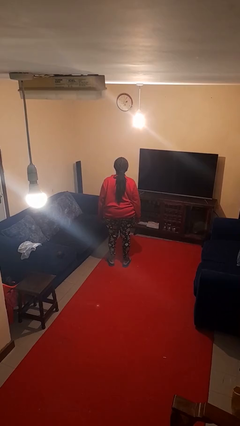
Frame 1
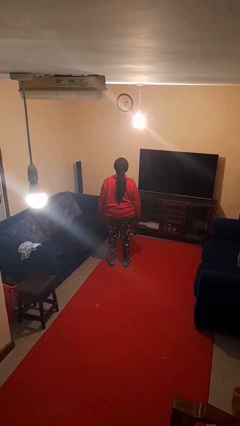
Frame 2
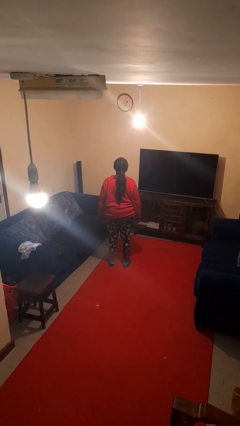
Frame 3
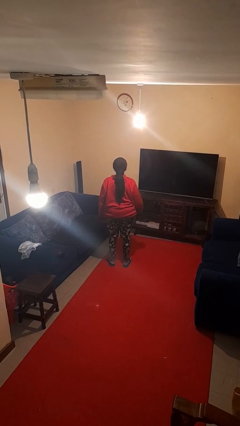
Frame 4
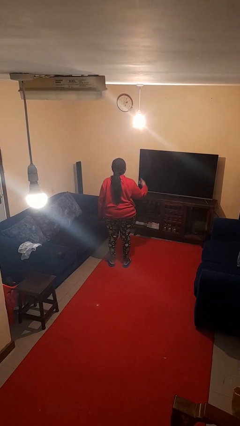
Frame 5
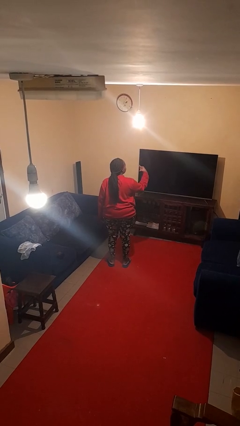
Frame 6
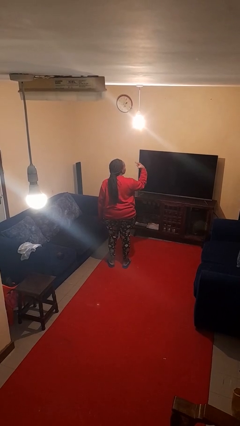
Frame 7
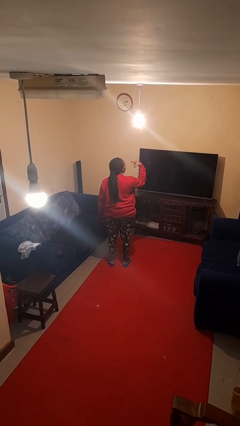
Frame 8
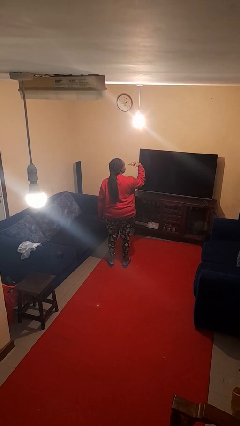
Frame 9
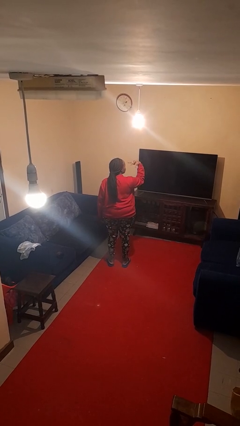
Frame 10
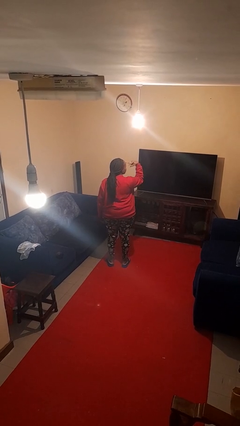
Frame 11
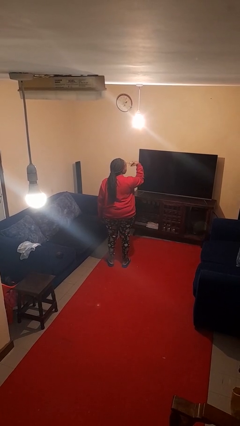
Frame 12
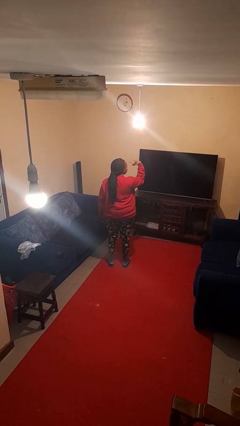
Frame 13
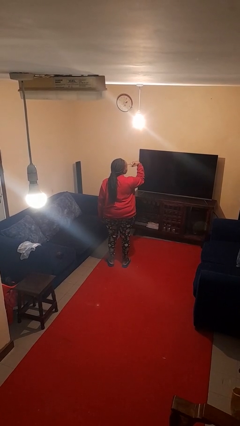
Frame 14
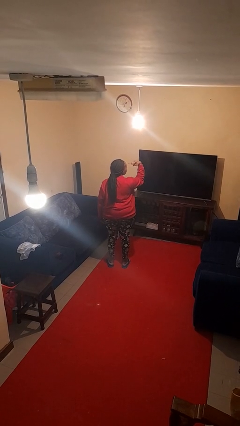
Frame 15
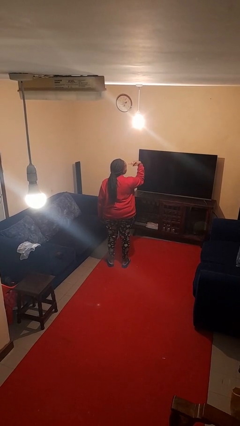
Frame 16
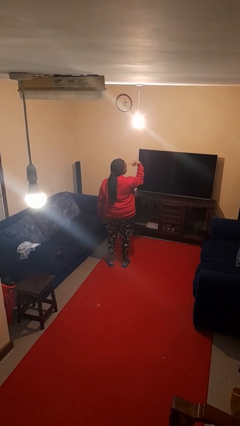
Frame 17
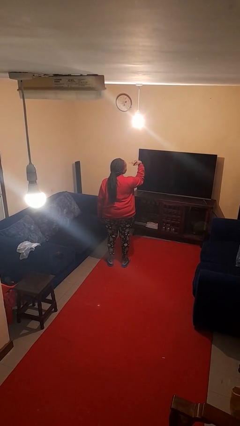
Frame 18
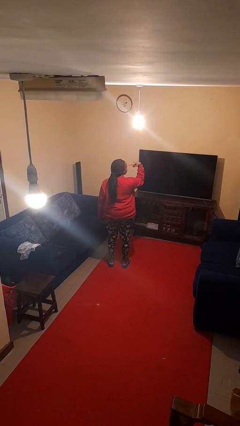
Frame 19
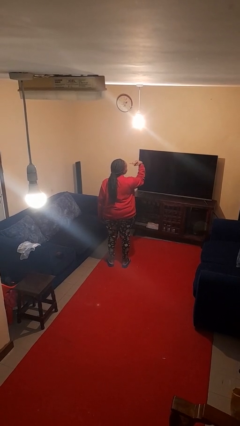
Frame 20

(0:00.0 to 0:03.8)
person gestures watch closely

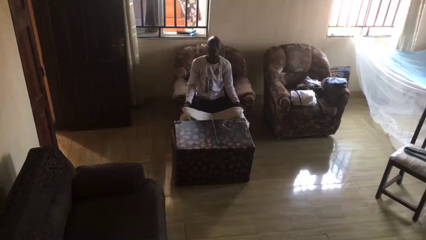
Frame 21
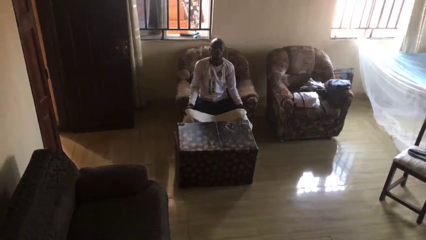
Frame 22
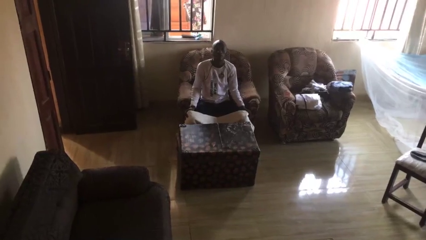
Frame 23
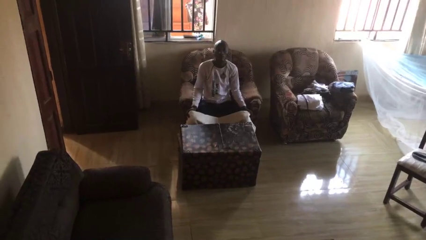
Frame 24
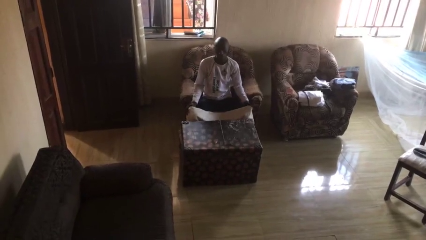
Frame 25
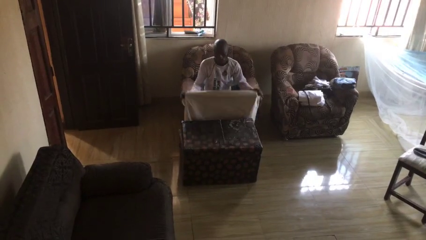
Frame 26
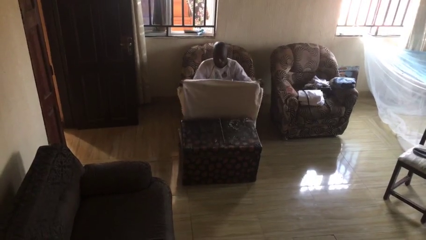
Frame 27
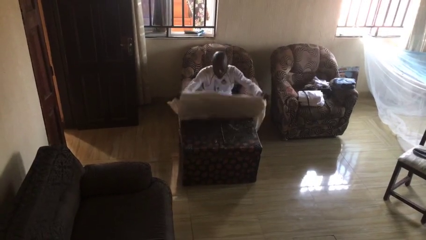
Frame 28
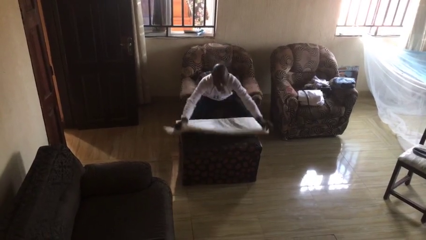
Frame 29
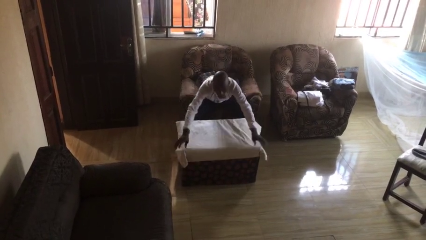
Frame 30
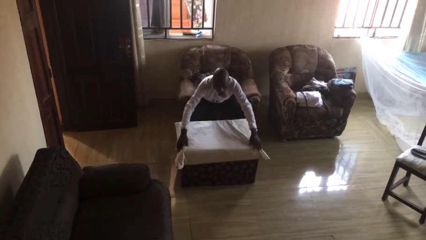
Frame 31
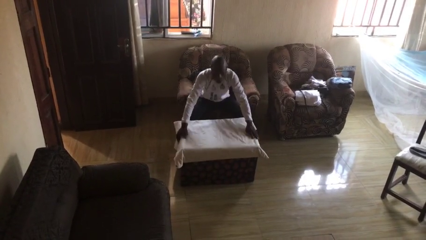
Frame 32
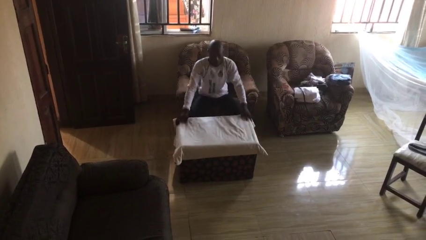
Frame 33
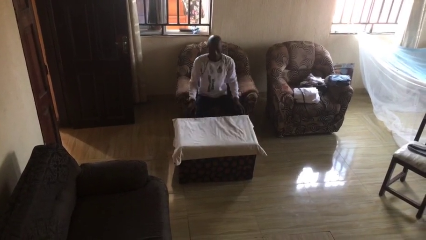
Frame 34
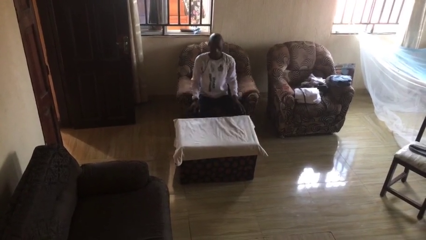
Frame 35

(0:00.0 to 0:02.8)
person spreads tablecloth

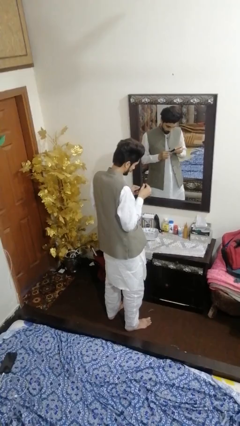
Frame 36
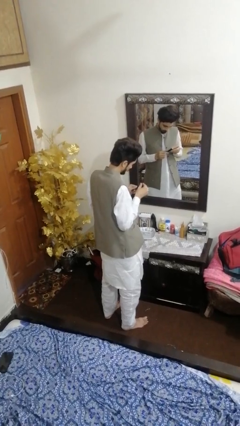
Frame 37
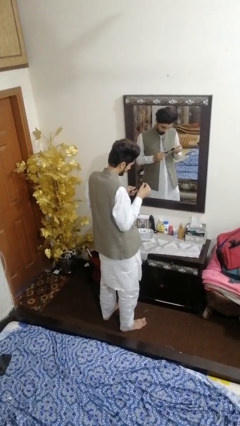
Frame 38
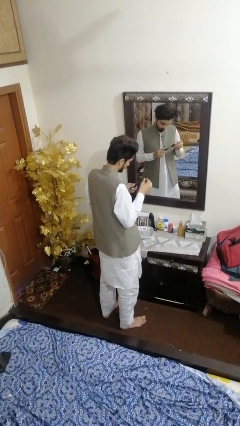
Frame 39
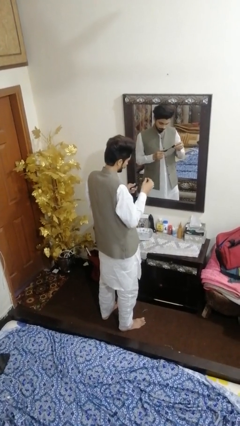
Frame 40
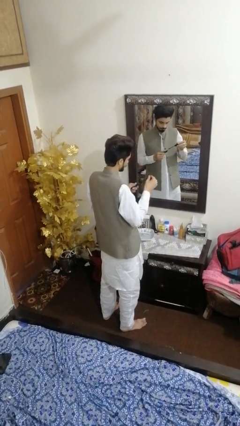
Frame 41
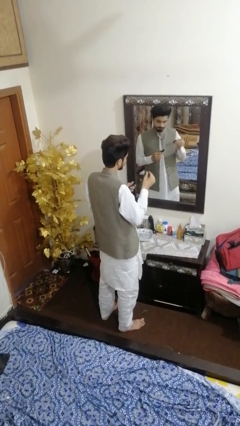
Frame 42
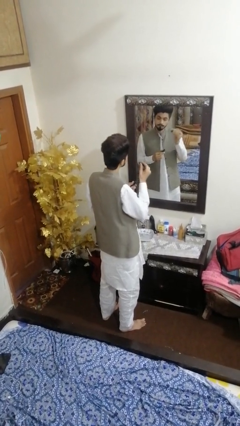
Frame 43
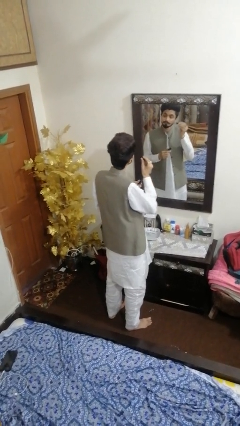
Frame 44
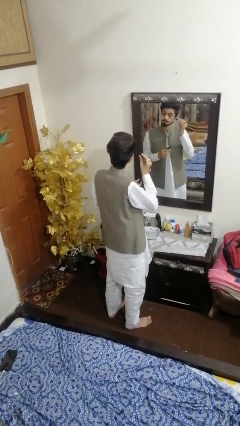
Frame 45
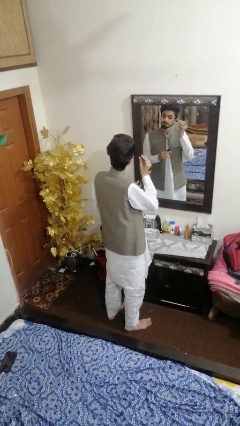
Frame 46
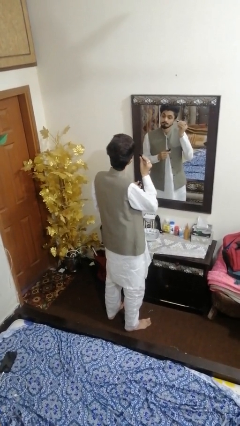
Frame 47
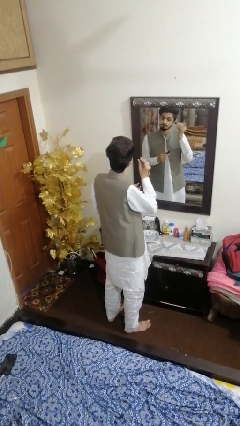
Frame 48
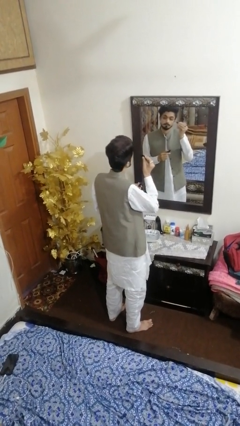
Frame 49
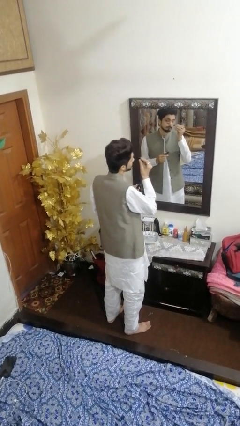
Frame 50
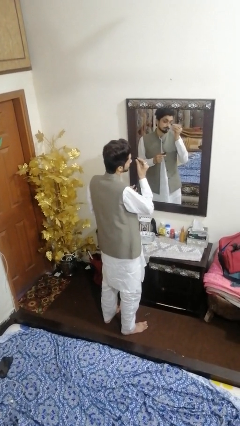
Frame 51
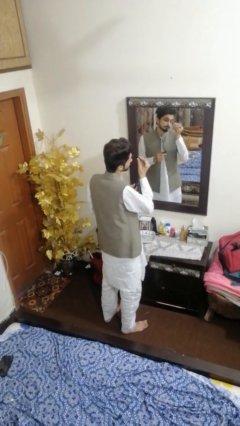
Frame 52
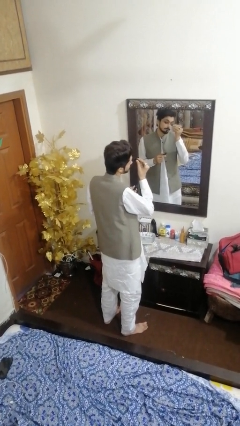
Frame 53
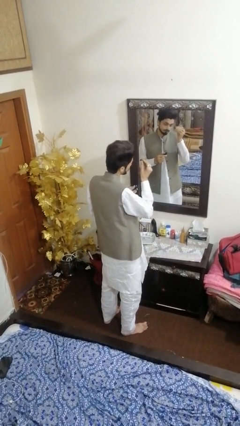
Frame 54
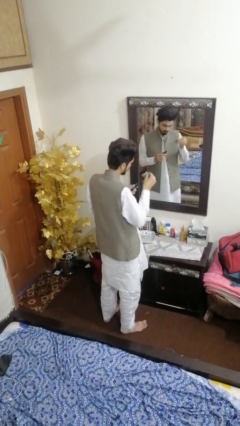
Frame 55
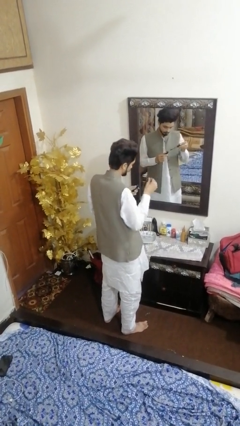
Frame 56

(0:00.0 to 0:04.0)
person applies eye makeup

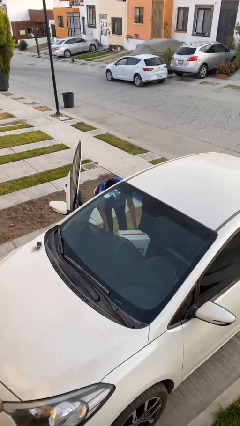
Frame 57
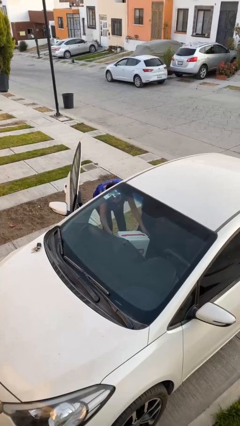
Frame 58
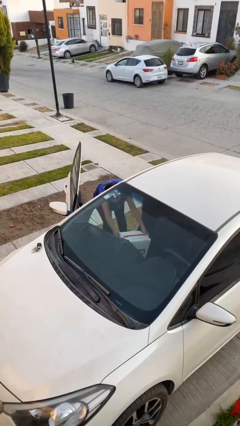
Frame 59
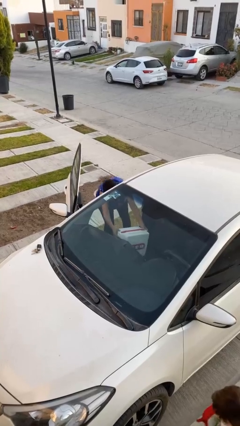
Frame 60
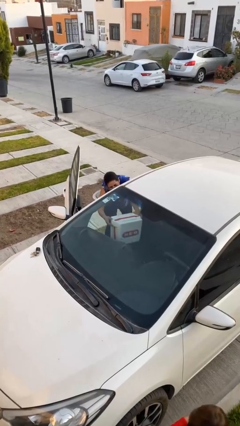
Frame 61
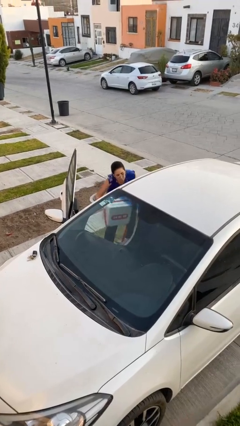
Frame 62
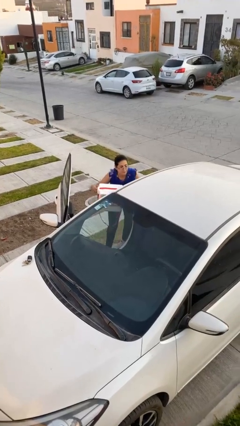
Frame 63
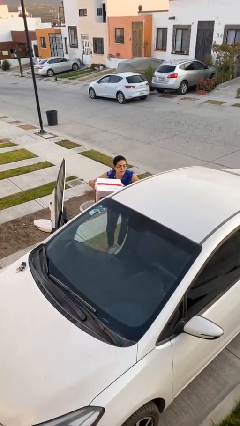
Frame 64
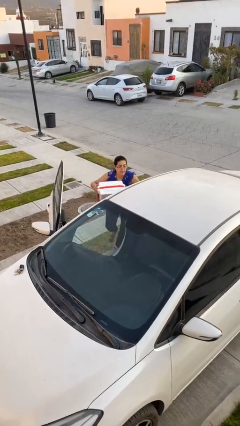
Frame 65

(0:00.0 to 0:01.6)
person unloads car

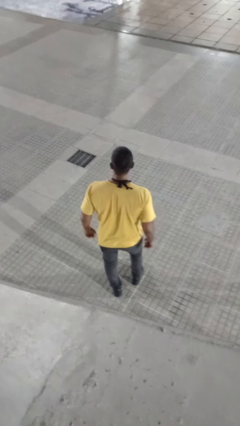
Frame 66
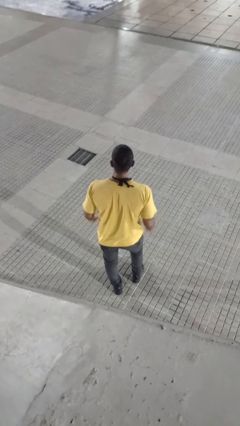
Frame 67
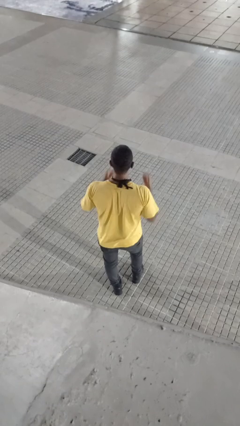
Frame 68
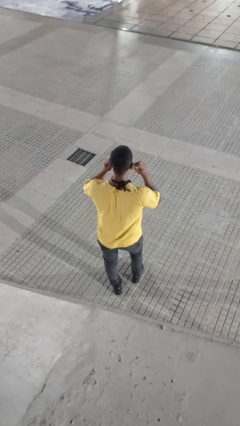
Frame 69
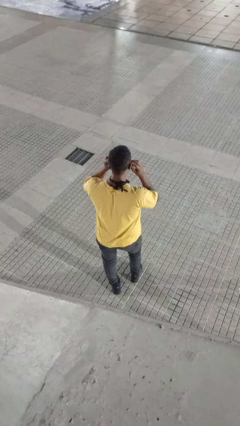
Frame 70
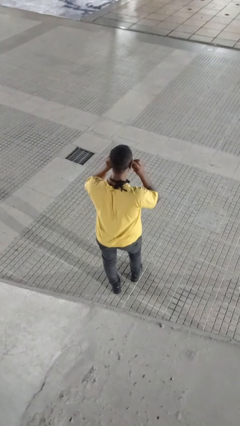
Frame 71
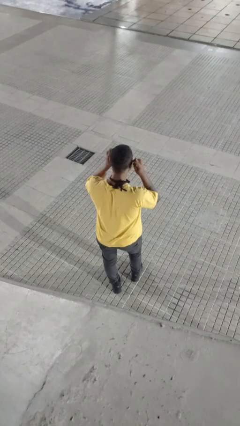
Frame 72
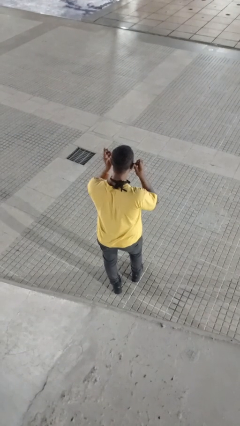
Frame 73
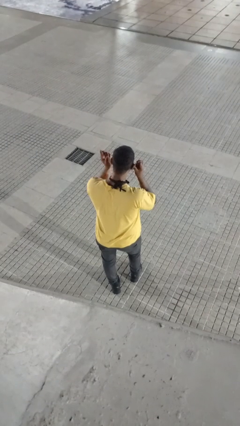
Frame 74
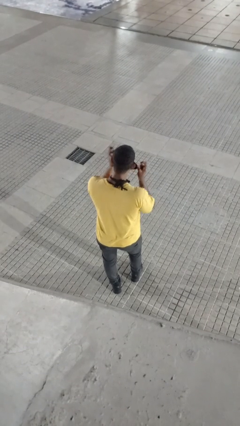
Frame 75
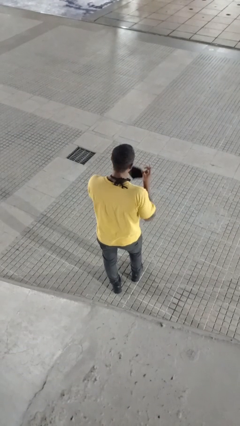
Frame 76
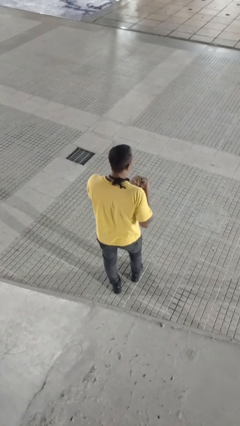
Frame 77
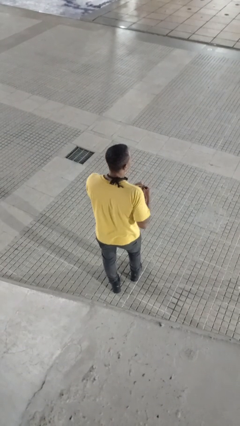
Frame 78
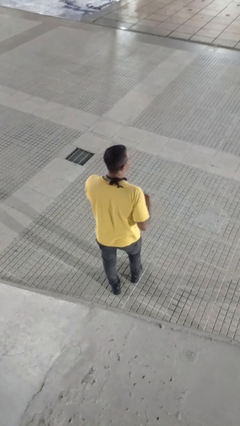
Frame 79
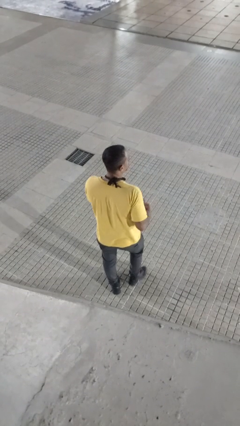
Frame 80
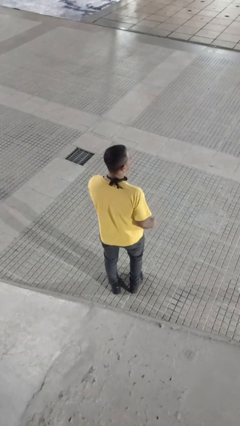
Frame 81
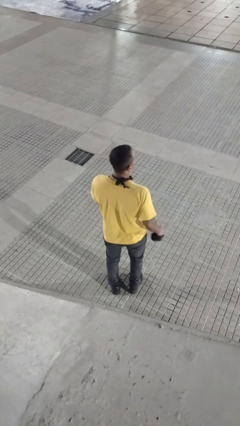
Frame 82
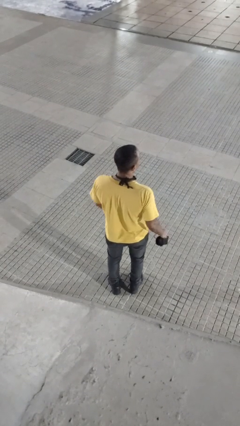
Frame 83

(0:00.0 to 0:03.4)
person takes off facemask

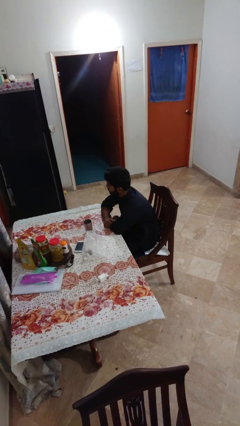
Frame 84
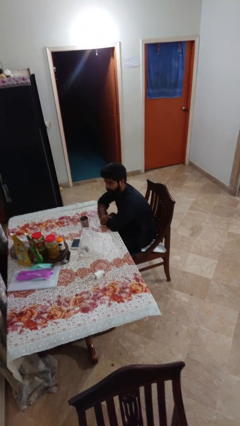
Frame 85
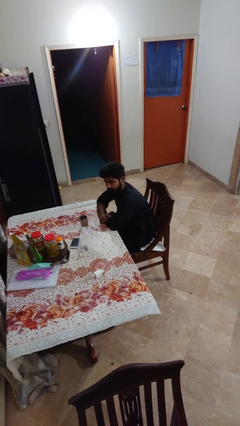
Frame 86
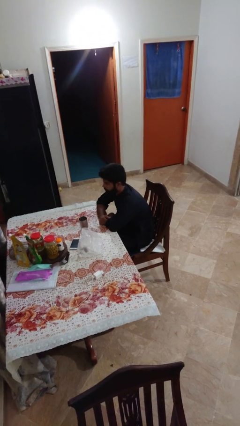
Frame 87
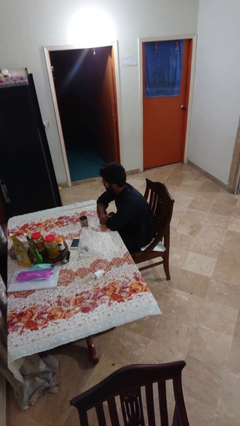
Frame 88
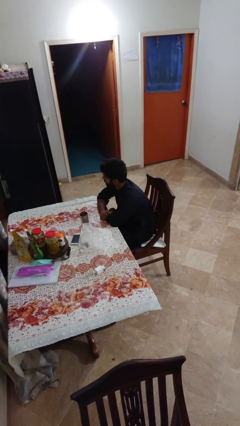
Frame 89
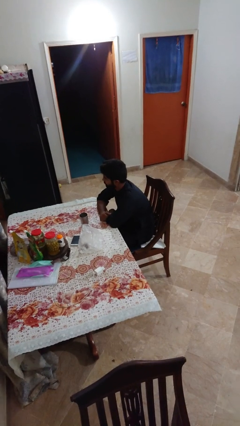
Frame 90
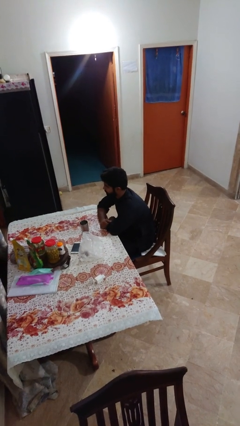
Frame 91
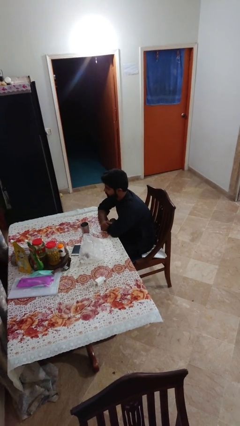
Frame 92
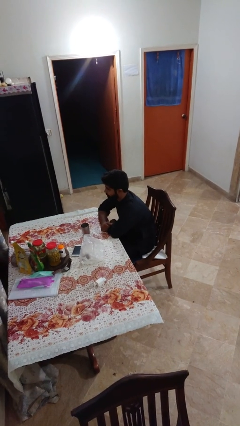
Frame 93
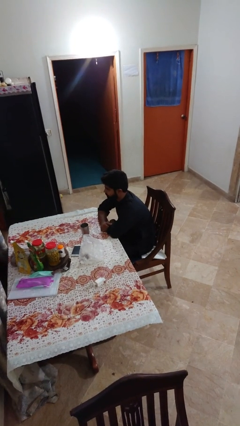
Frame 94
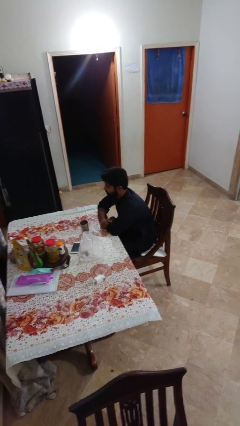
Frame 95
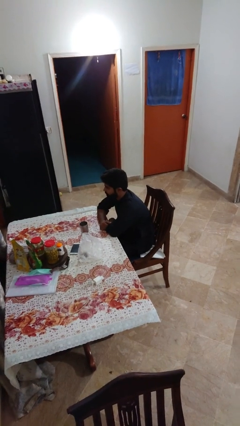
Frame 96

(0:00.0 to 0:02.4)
person shakes head
